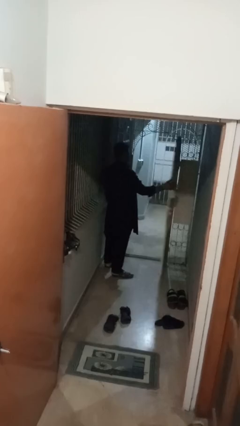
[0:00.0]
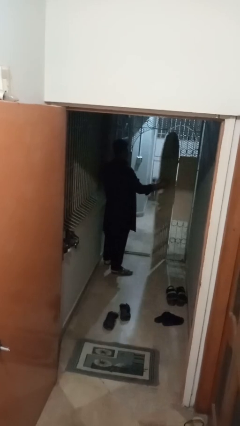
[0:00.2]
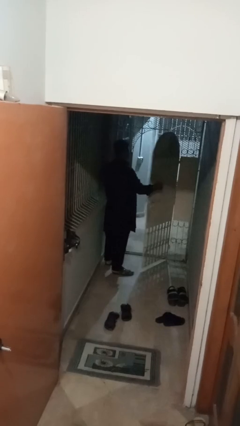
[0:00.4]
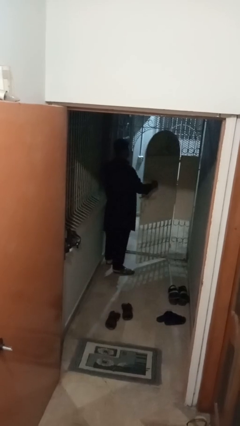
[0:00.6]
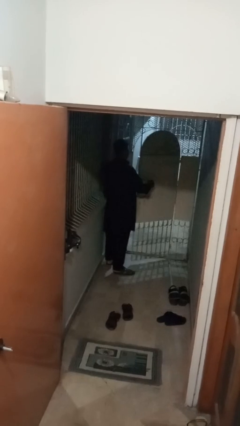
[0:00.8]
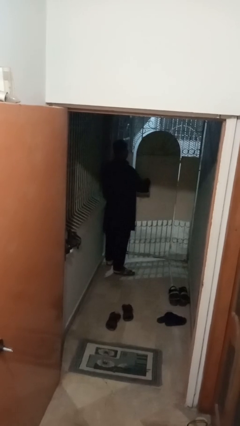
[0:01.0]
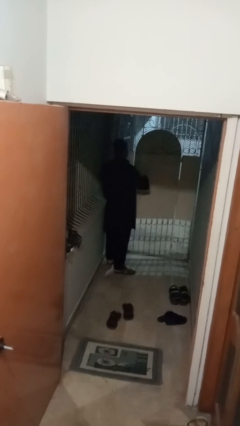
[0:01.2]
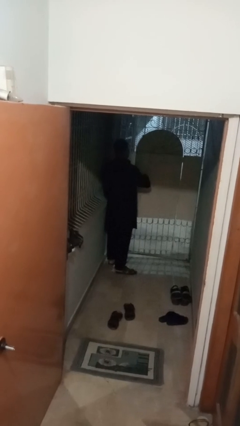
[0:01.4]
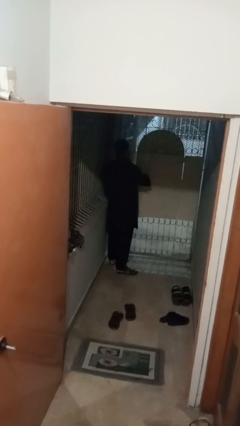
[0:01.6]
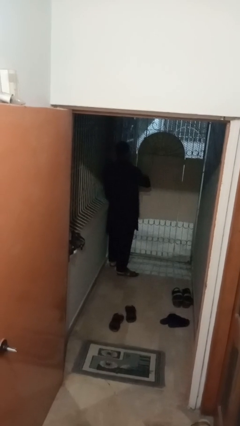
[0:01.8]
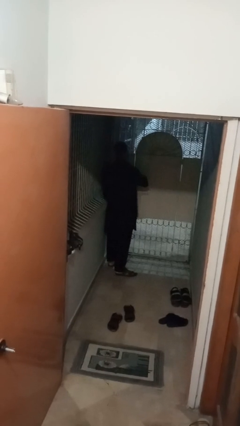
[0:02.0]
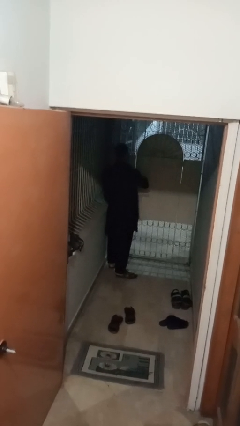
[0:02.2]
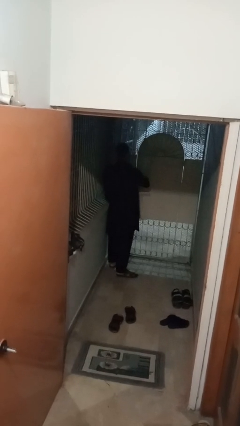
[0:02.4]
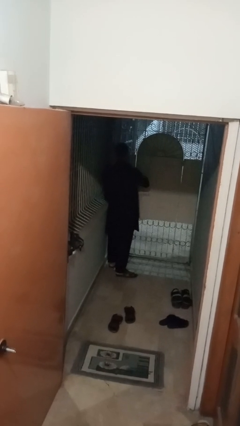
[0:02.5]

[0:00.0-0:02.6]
person closes gate

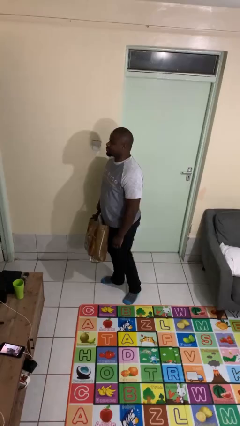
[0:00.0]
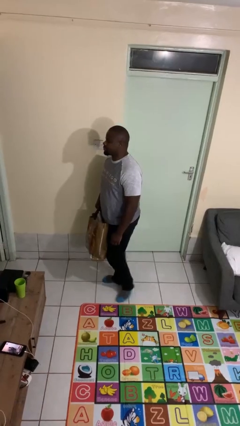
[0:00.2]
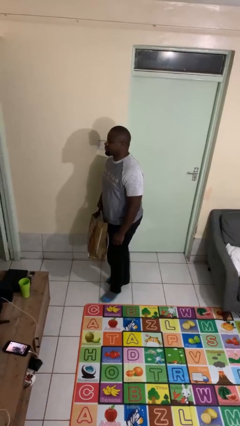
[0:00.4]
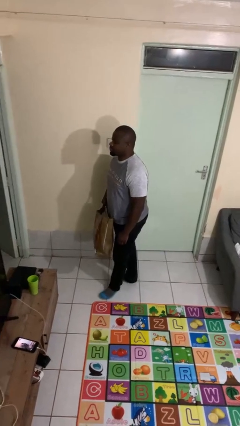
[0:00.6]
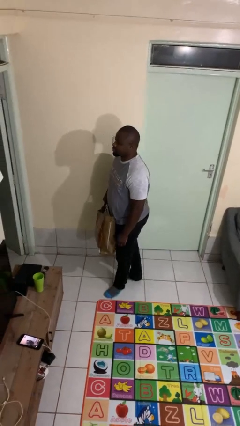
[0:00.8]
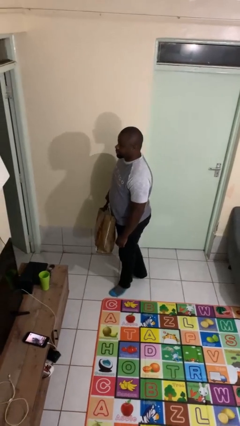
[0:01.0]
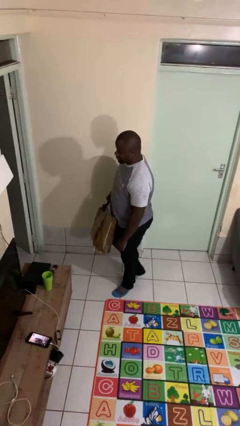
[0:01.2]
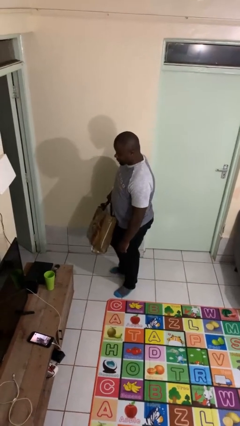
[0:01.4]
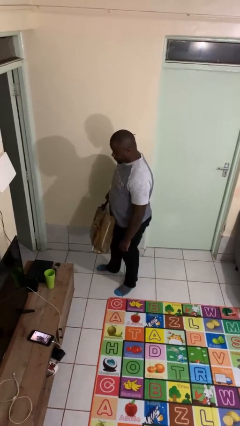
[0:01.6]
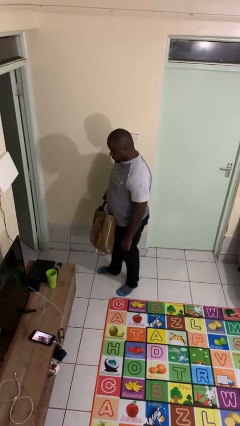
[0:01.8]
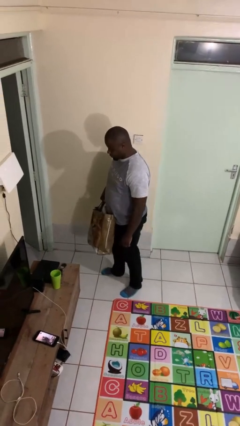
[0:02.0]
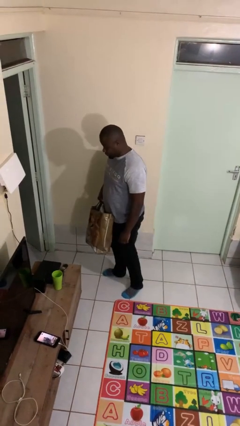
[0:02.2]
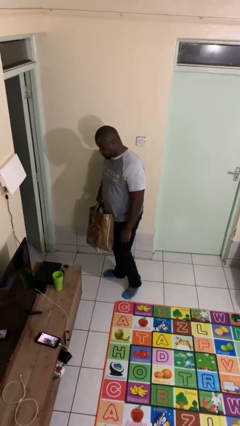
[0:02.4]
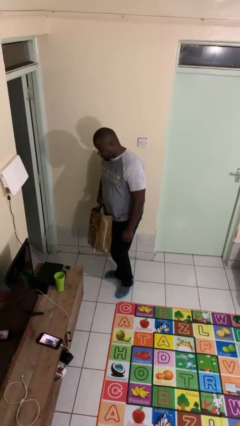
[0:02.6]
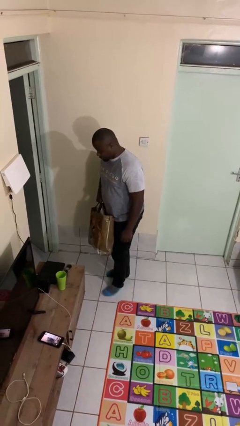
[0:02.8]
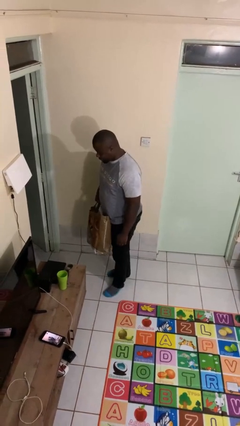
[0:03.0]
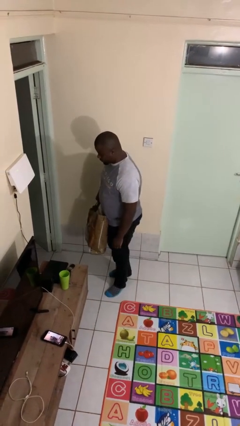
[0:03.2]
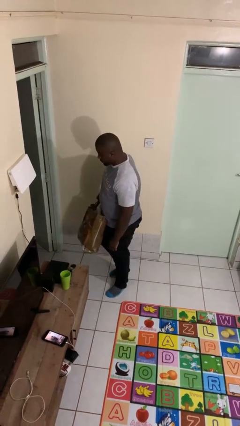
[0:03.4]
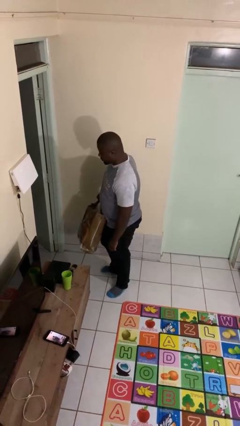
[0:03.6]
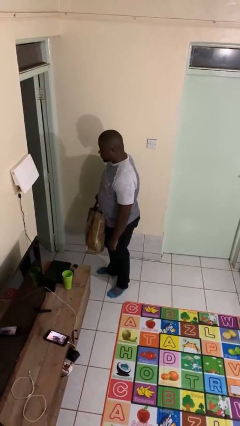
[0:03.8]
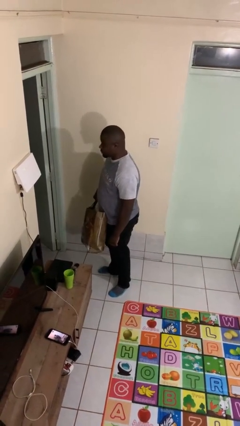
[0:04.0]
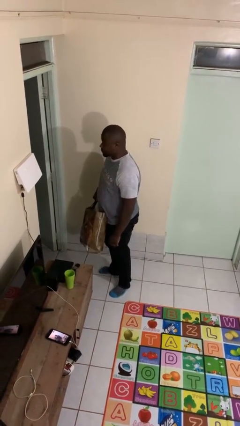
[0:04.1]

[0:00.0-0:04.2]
person carries groceries

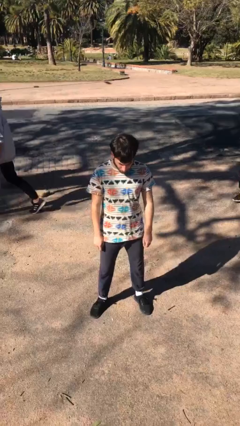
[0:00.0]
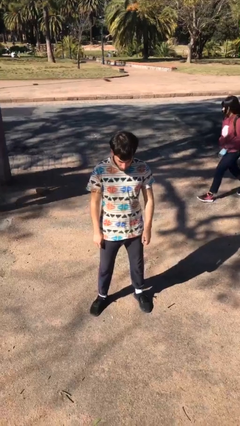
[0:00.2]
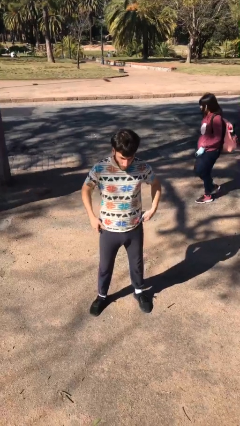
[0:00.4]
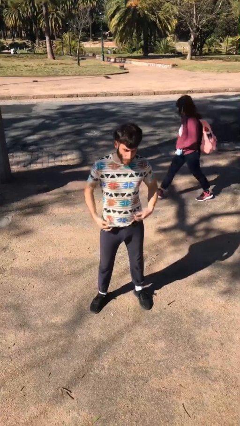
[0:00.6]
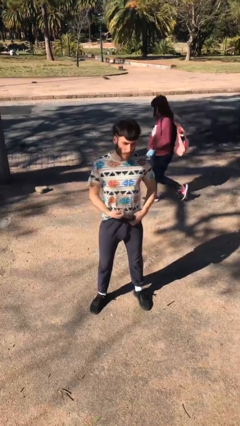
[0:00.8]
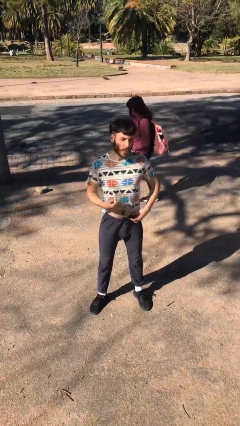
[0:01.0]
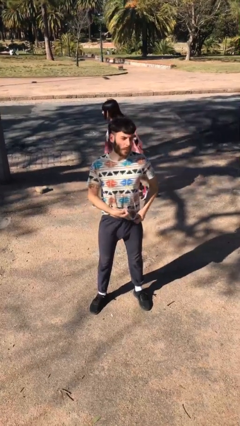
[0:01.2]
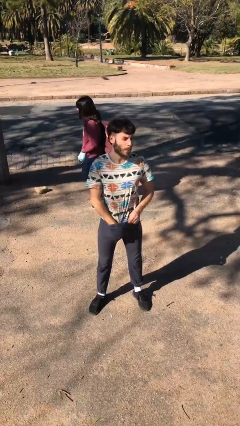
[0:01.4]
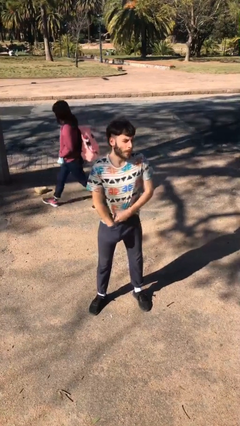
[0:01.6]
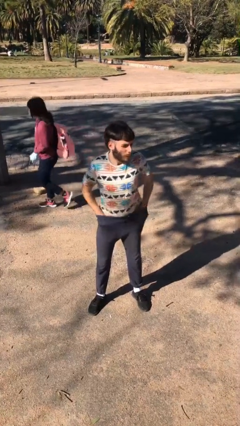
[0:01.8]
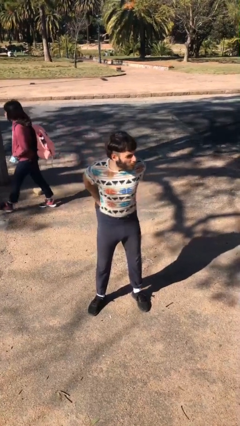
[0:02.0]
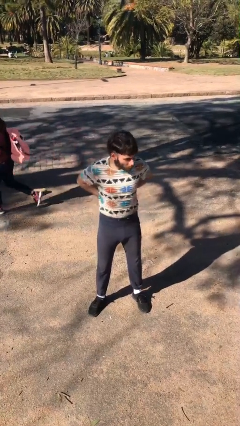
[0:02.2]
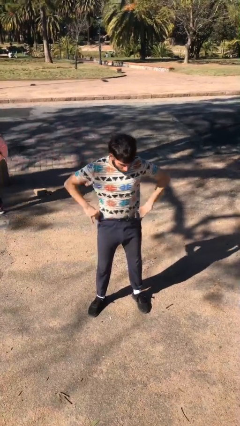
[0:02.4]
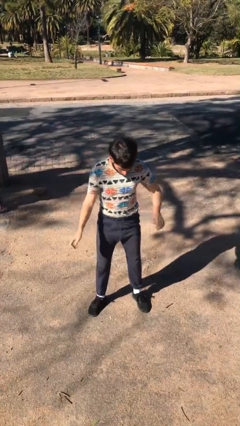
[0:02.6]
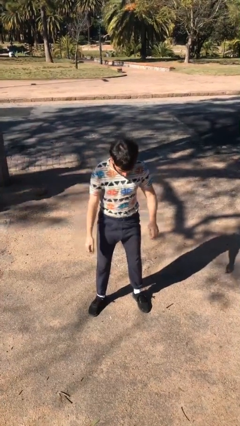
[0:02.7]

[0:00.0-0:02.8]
person tucks in shirt

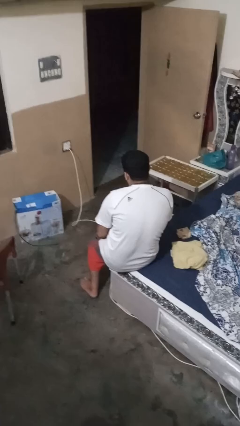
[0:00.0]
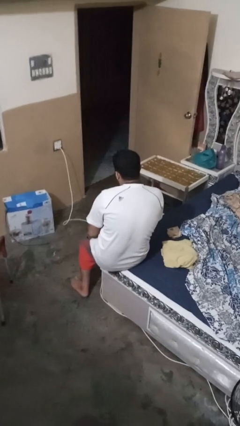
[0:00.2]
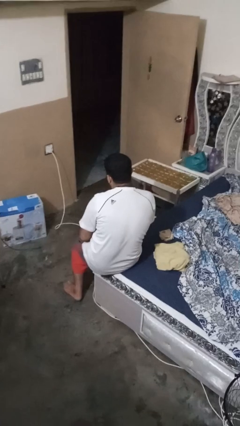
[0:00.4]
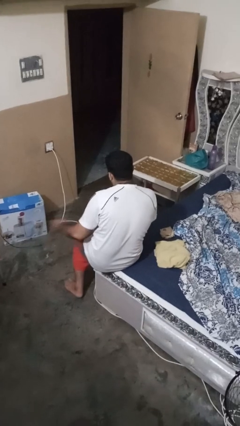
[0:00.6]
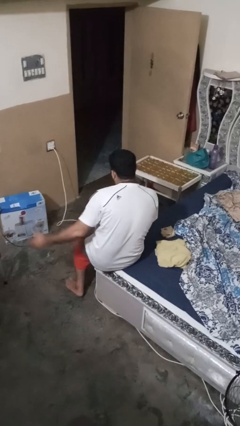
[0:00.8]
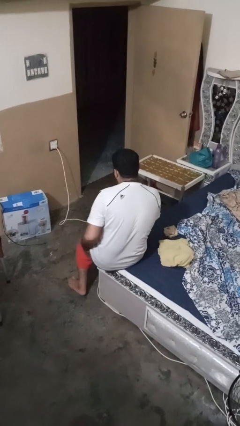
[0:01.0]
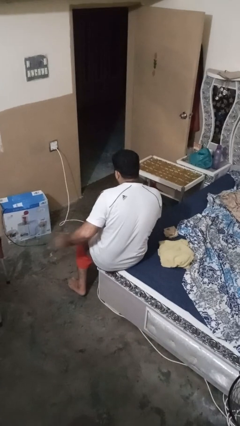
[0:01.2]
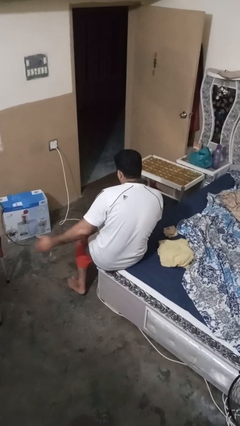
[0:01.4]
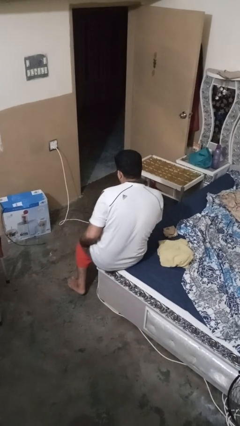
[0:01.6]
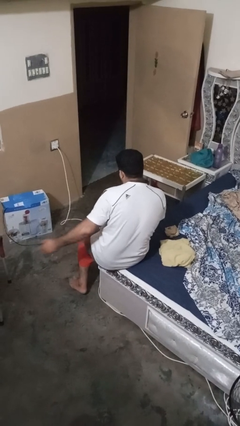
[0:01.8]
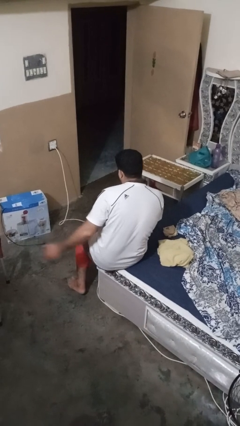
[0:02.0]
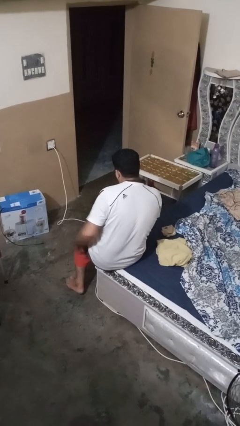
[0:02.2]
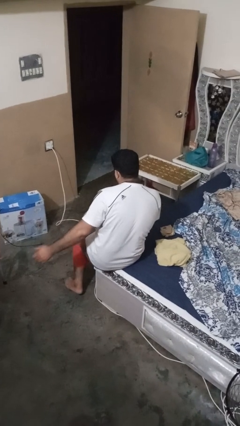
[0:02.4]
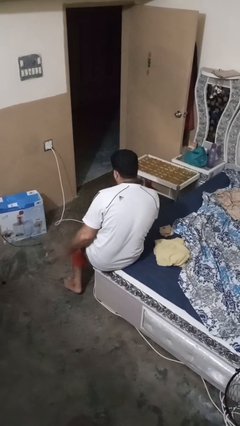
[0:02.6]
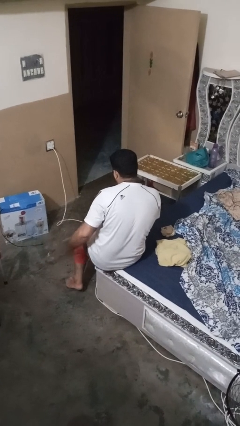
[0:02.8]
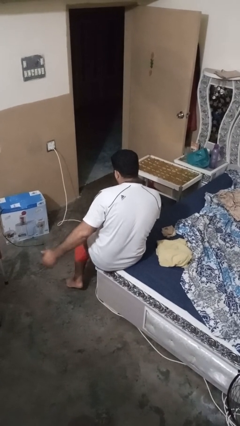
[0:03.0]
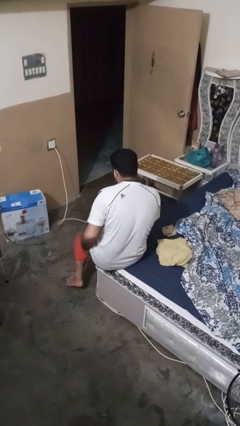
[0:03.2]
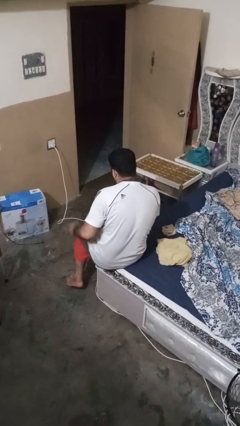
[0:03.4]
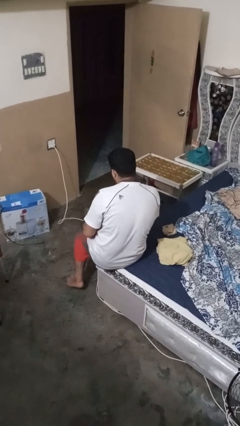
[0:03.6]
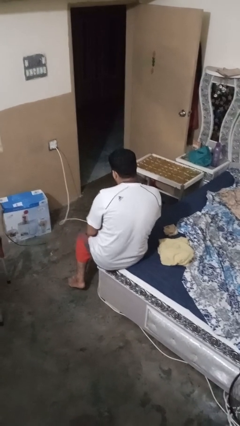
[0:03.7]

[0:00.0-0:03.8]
person slaps hands on thighs

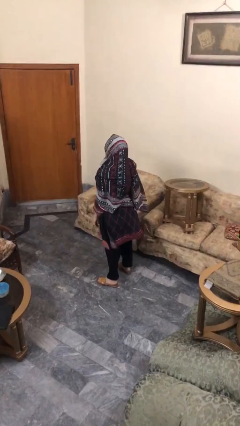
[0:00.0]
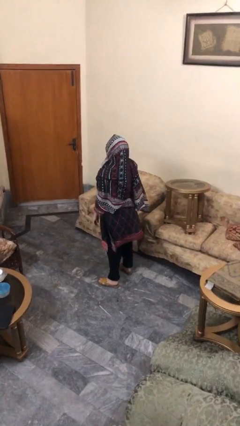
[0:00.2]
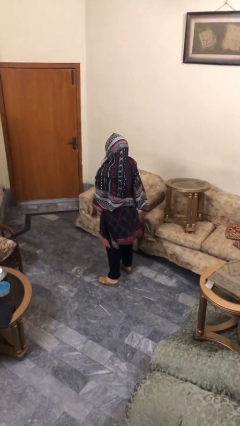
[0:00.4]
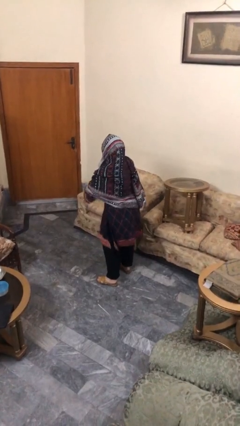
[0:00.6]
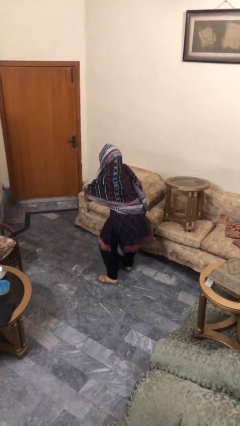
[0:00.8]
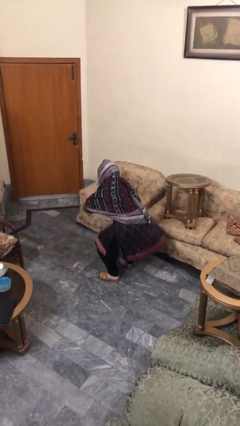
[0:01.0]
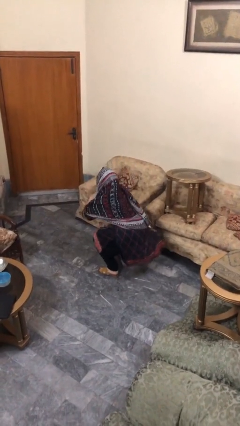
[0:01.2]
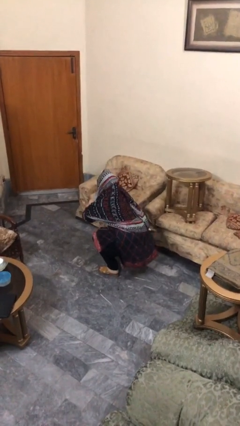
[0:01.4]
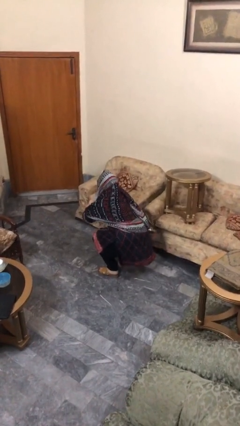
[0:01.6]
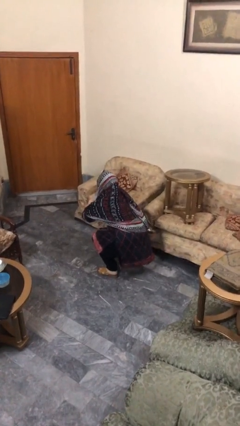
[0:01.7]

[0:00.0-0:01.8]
person squats

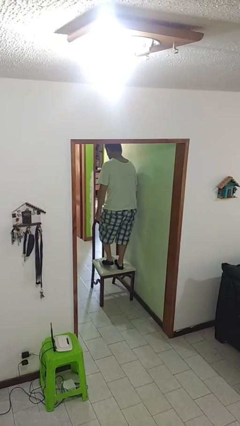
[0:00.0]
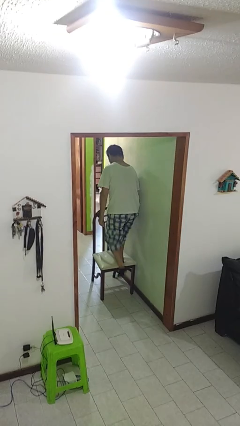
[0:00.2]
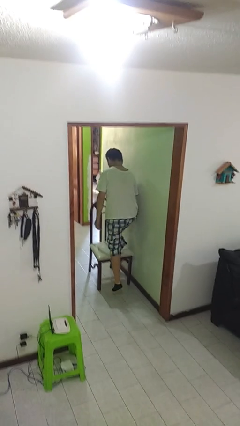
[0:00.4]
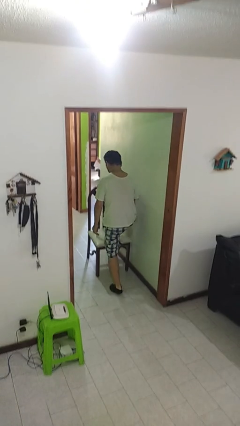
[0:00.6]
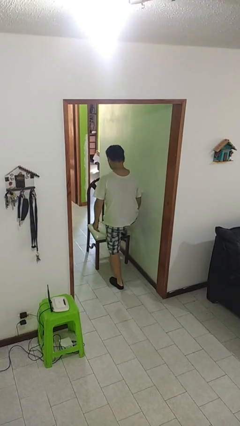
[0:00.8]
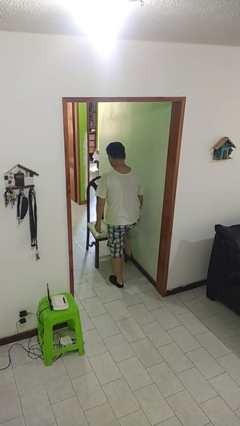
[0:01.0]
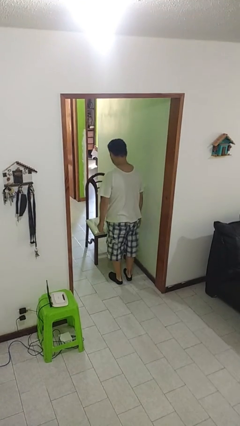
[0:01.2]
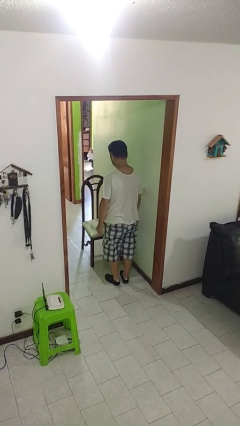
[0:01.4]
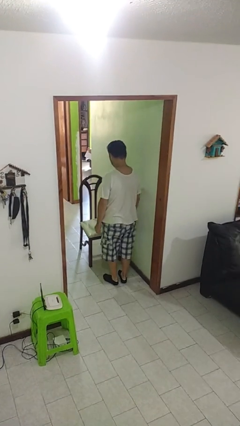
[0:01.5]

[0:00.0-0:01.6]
person climbs off chair

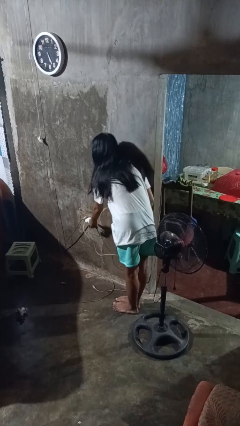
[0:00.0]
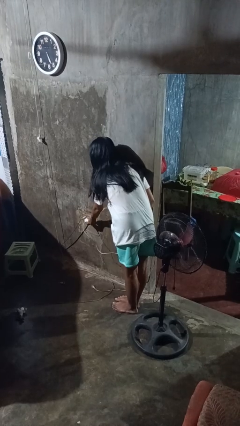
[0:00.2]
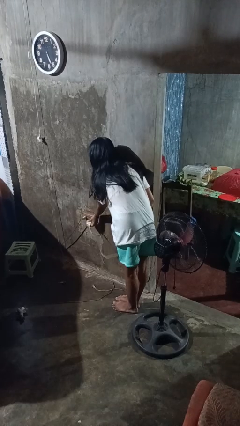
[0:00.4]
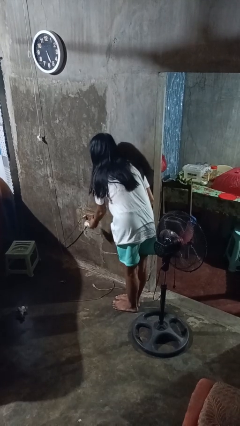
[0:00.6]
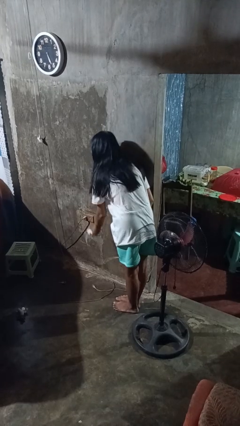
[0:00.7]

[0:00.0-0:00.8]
person unplugs from electrical socket
